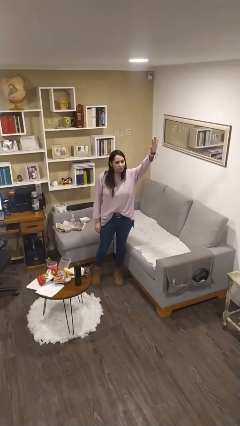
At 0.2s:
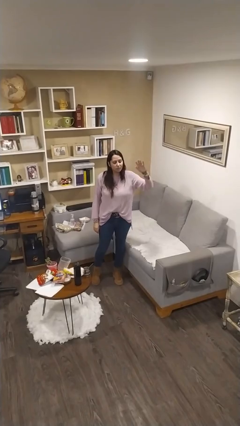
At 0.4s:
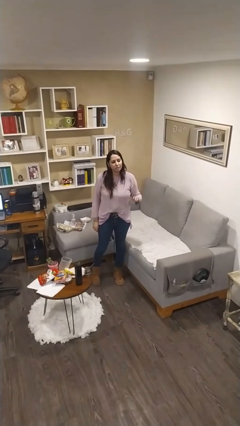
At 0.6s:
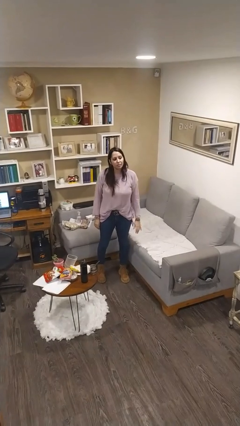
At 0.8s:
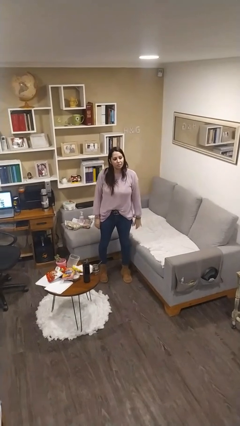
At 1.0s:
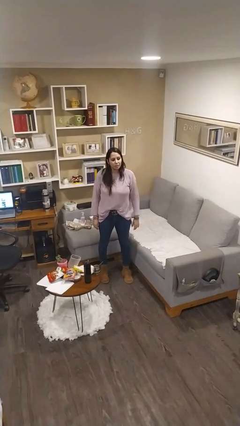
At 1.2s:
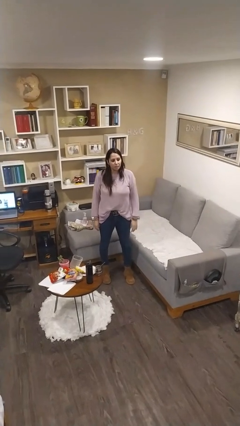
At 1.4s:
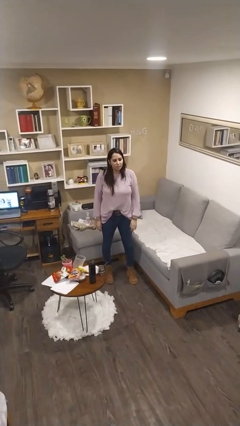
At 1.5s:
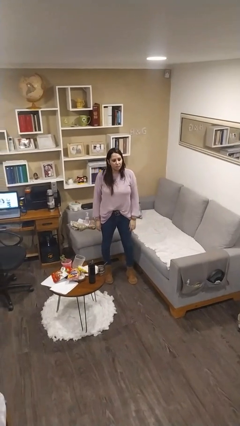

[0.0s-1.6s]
person gestures lower hand

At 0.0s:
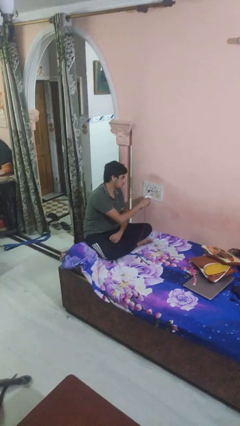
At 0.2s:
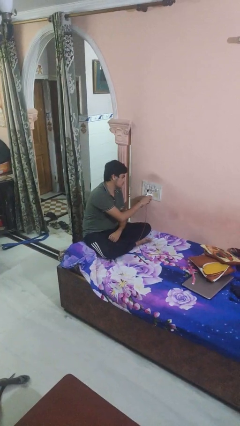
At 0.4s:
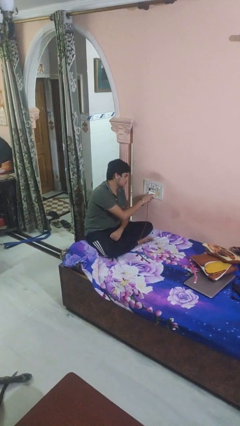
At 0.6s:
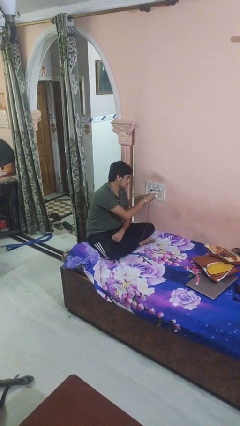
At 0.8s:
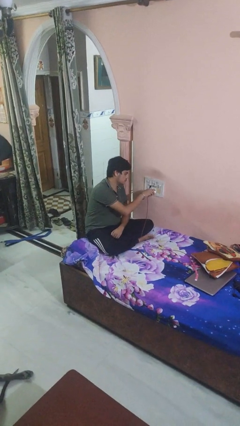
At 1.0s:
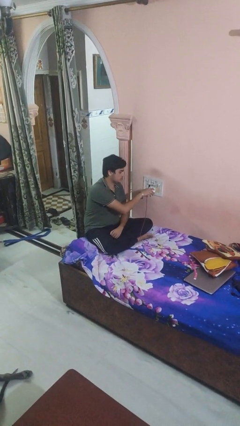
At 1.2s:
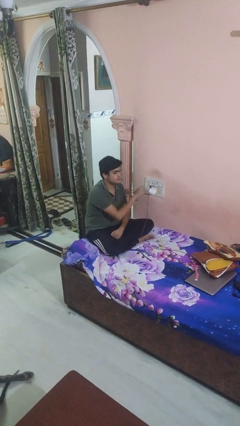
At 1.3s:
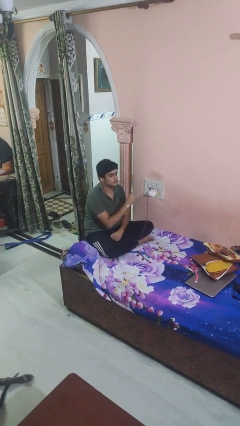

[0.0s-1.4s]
person plugs into electrical socket

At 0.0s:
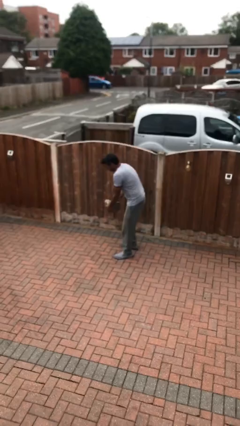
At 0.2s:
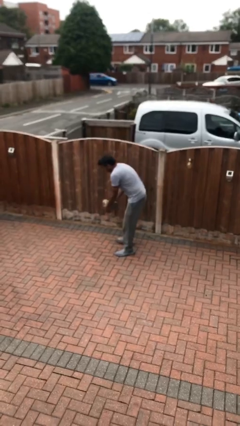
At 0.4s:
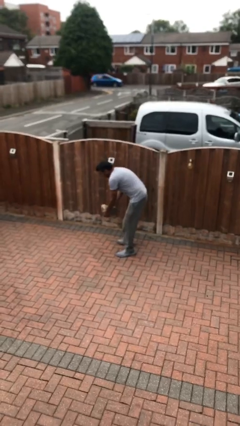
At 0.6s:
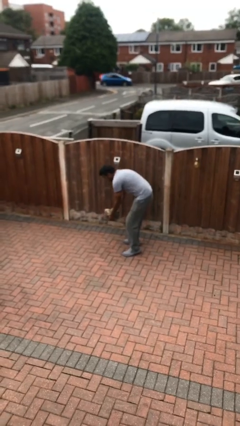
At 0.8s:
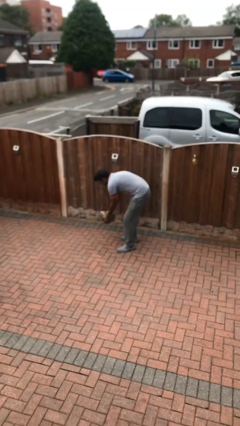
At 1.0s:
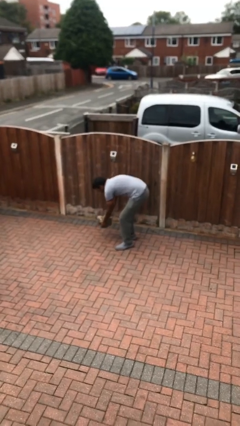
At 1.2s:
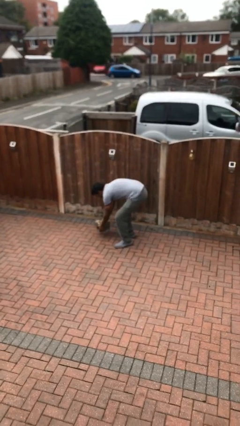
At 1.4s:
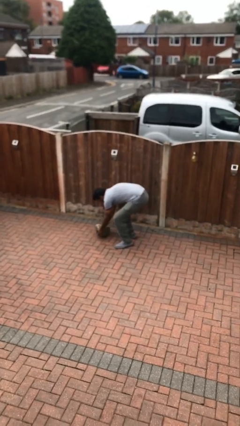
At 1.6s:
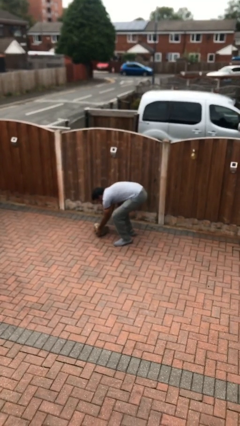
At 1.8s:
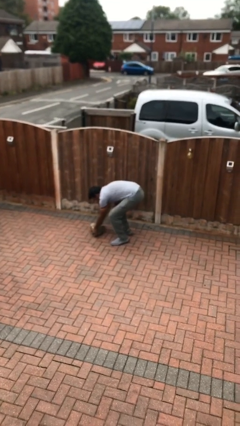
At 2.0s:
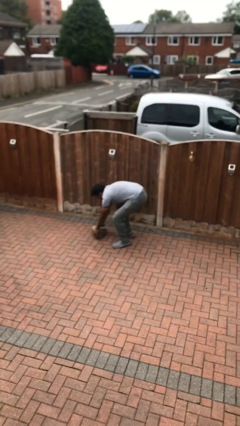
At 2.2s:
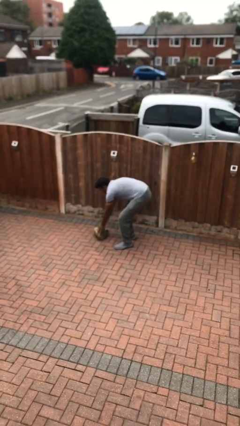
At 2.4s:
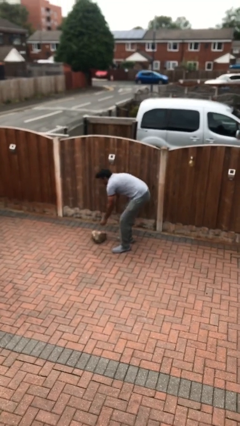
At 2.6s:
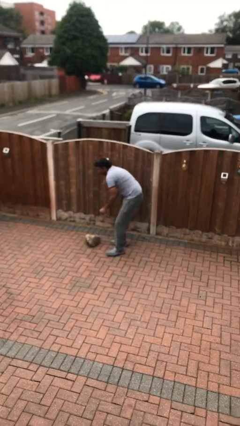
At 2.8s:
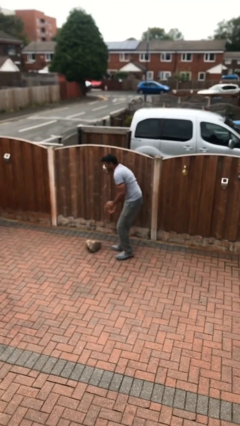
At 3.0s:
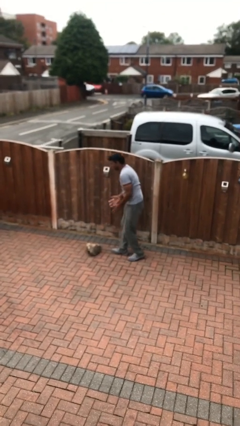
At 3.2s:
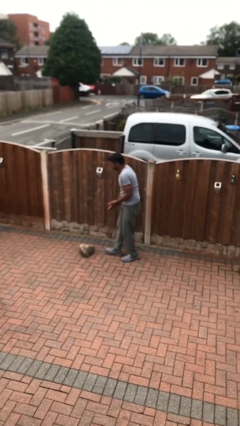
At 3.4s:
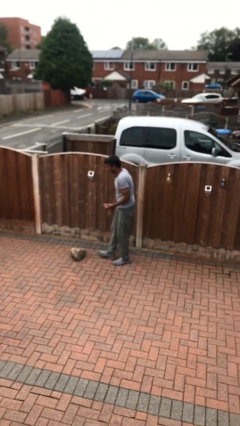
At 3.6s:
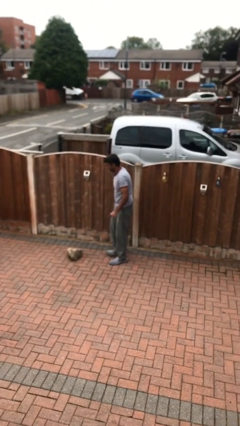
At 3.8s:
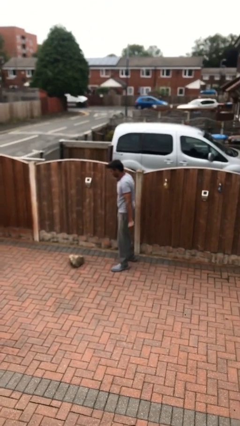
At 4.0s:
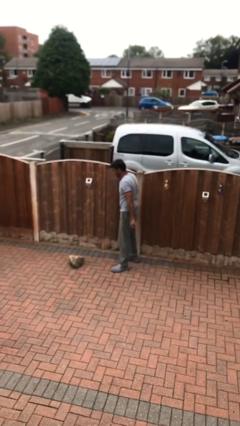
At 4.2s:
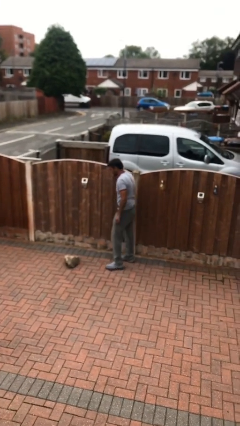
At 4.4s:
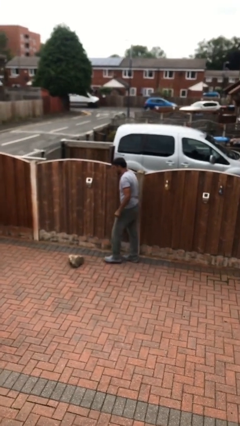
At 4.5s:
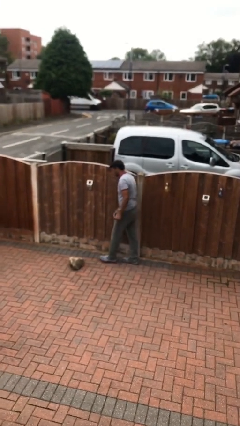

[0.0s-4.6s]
person puts down object on floor

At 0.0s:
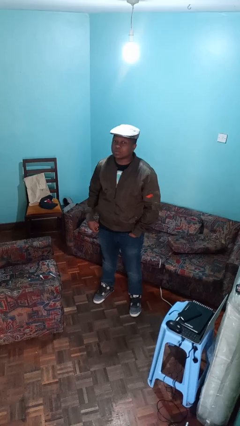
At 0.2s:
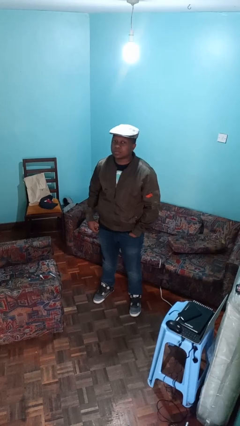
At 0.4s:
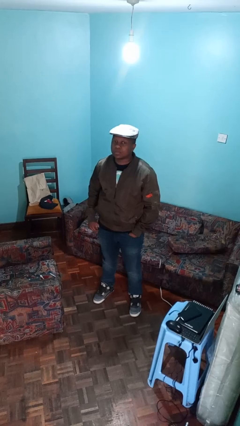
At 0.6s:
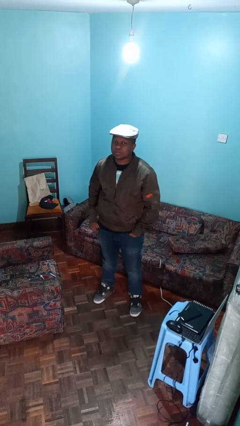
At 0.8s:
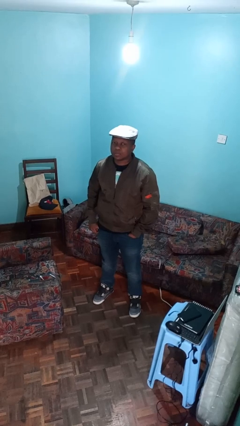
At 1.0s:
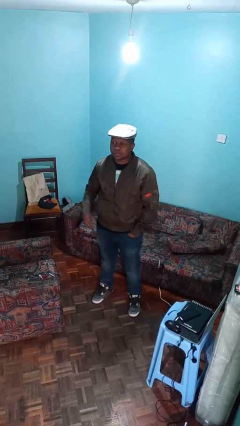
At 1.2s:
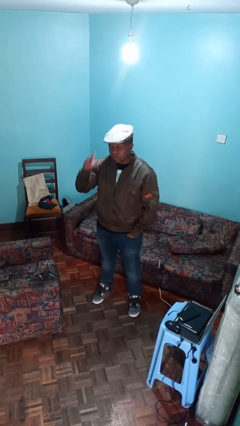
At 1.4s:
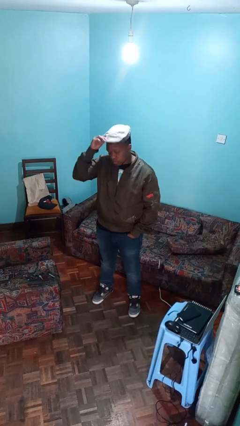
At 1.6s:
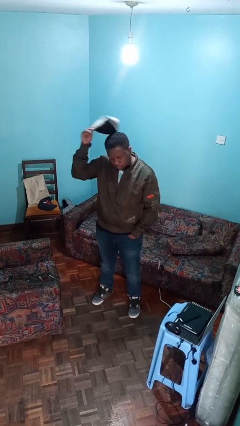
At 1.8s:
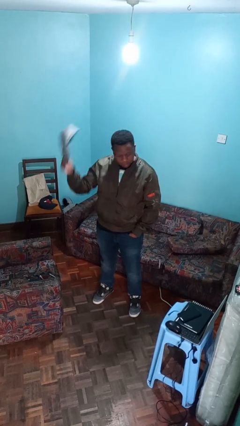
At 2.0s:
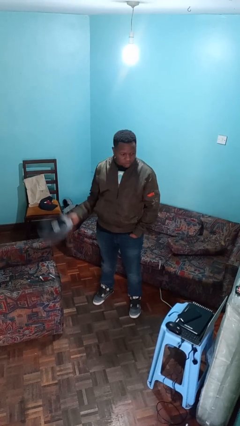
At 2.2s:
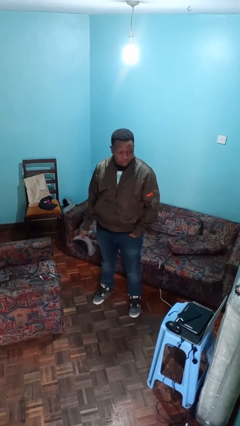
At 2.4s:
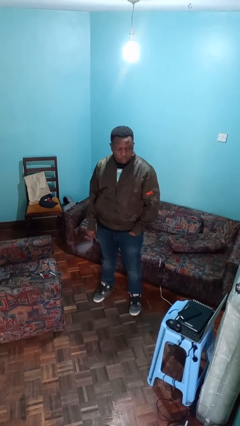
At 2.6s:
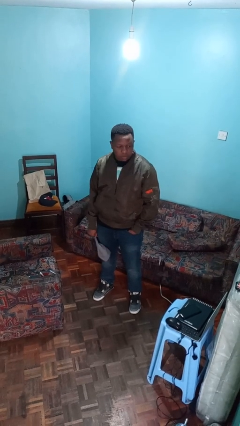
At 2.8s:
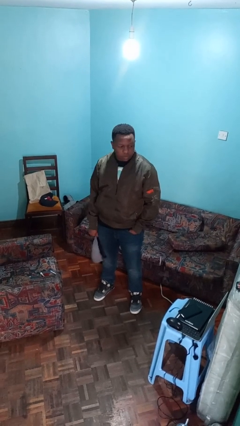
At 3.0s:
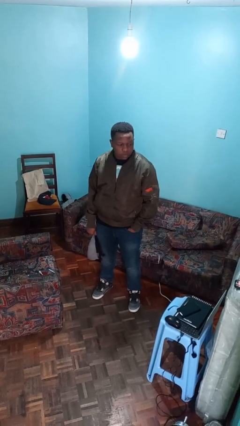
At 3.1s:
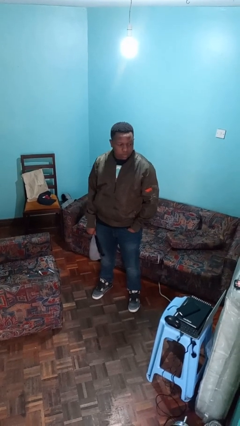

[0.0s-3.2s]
person takes off hat

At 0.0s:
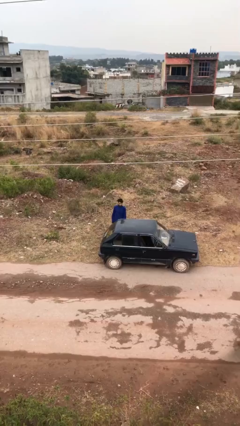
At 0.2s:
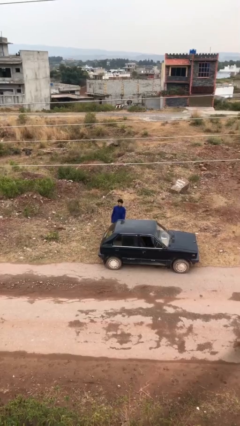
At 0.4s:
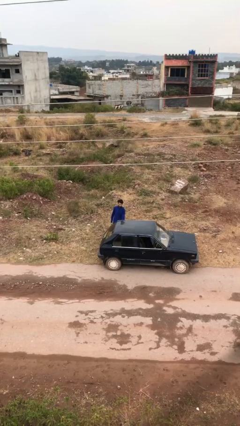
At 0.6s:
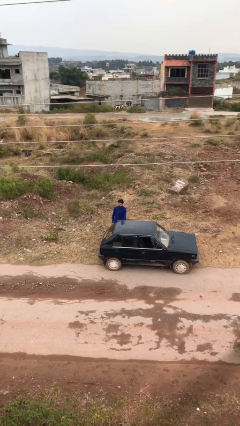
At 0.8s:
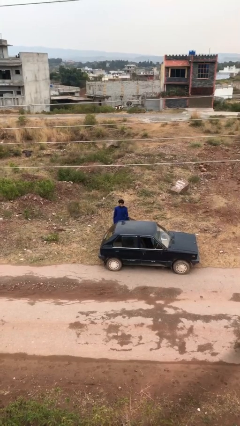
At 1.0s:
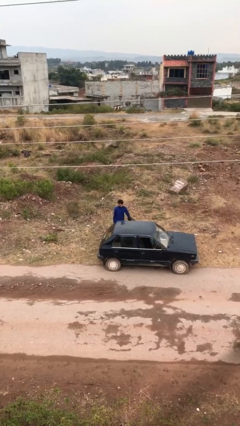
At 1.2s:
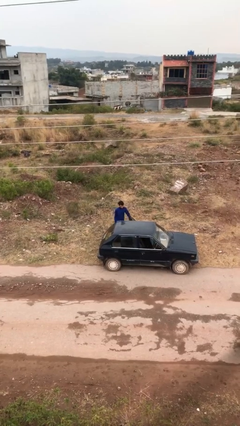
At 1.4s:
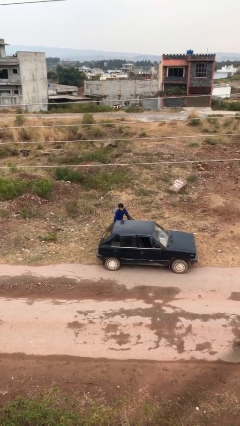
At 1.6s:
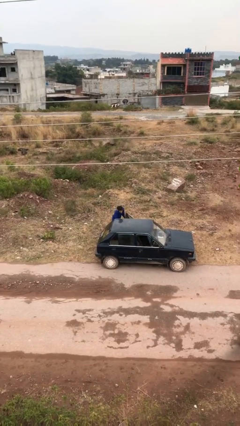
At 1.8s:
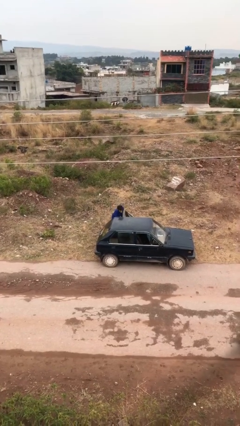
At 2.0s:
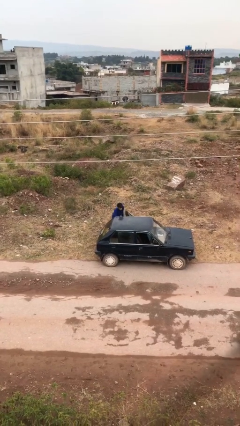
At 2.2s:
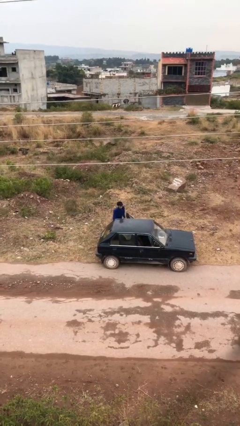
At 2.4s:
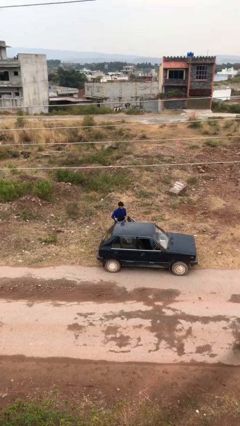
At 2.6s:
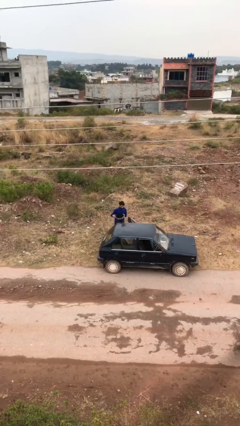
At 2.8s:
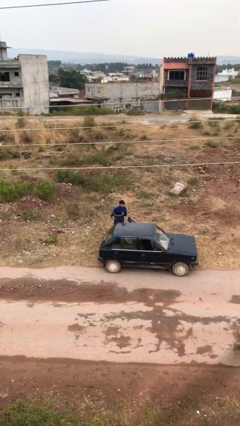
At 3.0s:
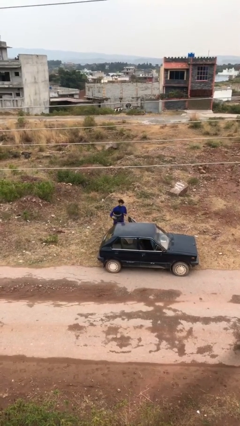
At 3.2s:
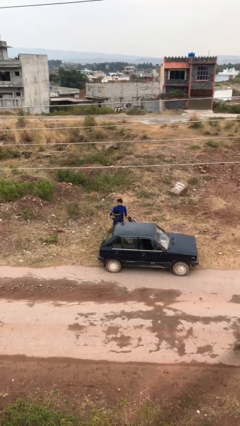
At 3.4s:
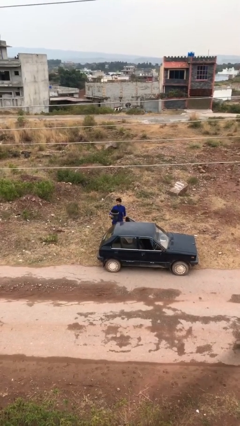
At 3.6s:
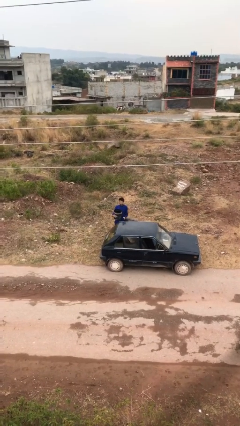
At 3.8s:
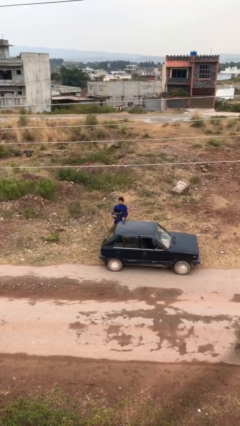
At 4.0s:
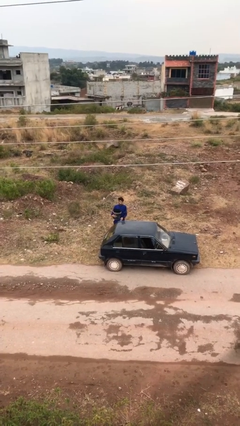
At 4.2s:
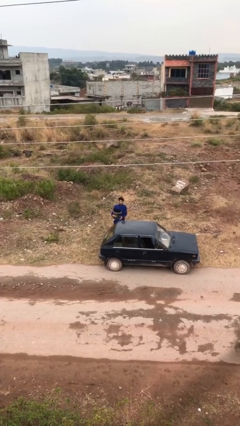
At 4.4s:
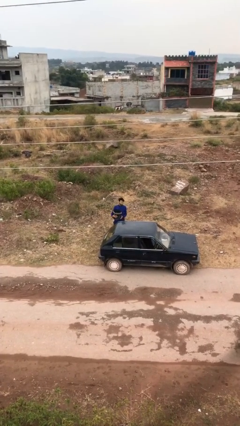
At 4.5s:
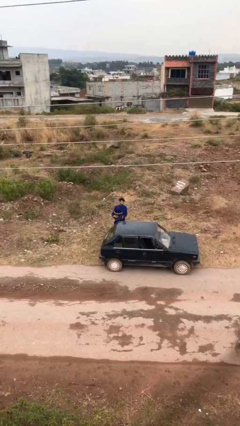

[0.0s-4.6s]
person unloads car

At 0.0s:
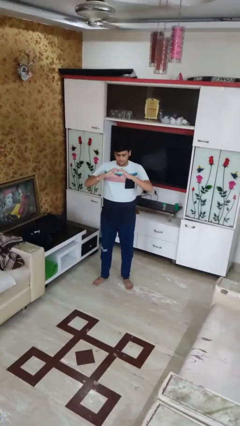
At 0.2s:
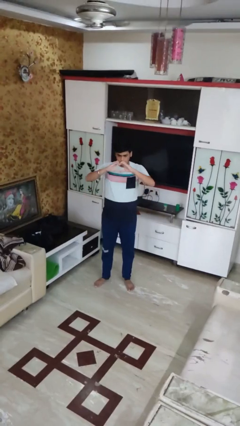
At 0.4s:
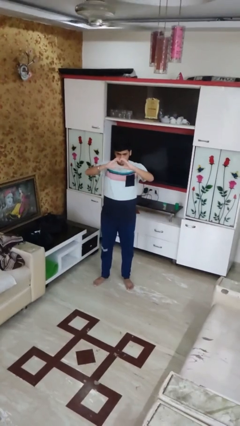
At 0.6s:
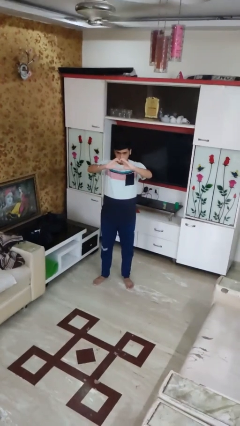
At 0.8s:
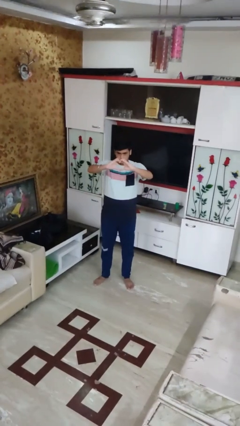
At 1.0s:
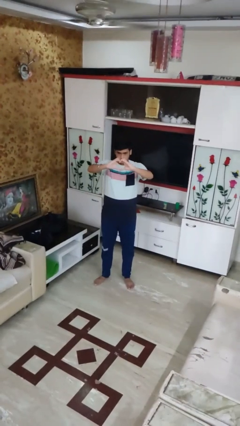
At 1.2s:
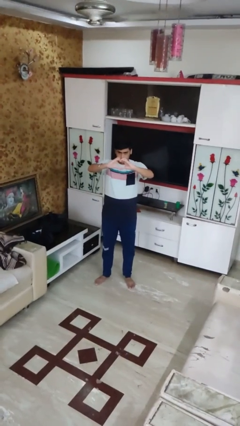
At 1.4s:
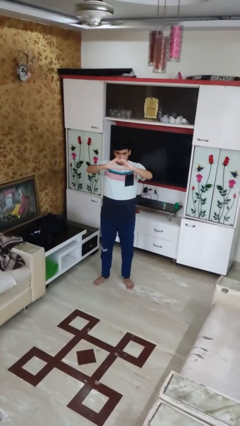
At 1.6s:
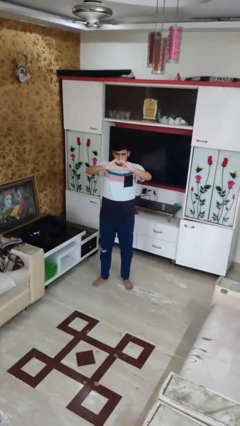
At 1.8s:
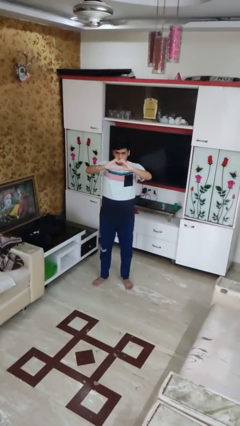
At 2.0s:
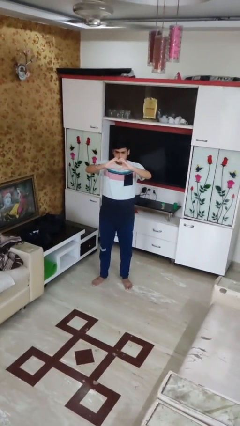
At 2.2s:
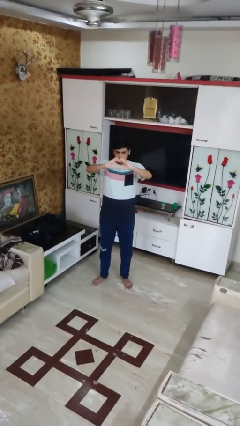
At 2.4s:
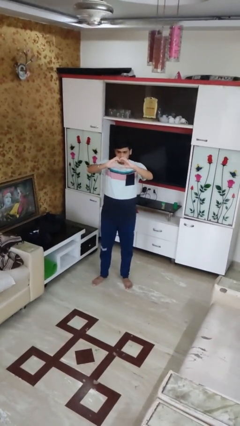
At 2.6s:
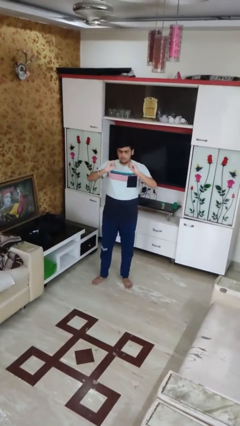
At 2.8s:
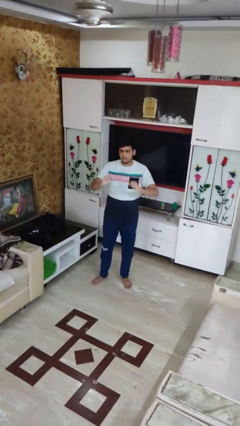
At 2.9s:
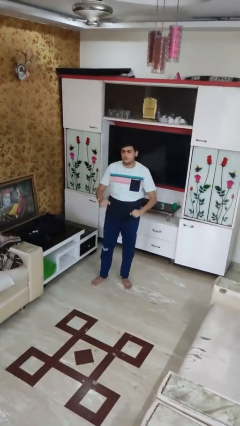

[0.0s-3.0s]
person gestures heart
